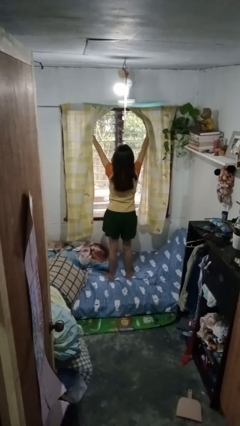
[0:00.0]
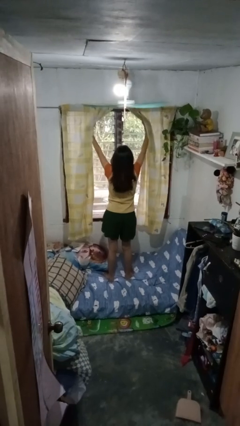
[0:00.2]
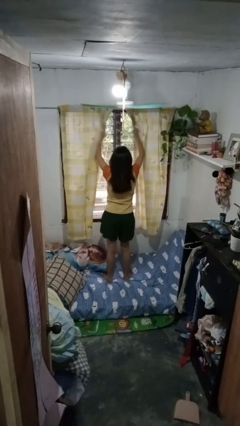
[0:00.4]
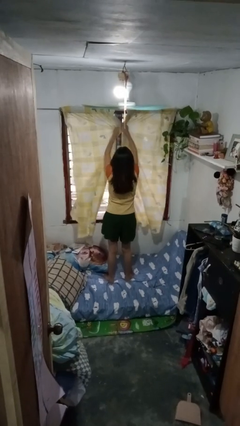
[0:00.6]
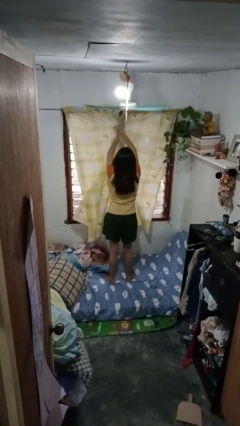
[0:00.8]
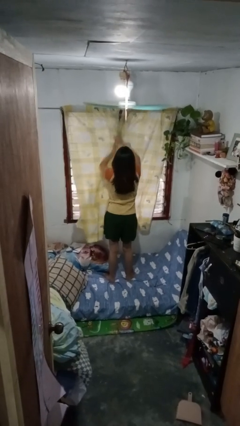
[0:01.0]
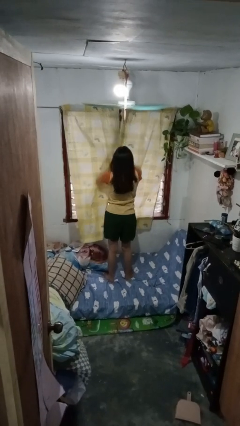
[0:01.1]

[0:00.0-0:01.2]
person closes curtains

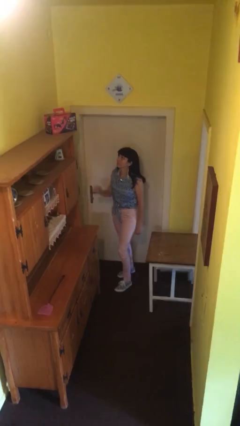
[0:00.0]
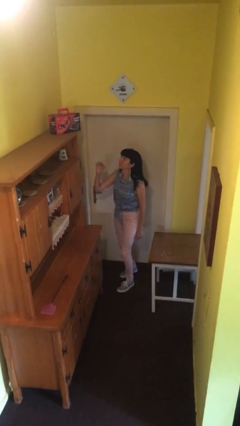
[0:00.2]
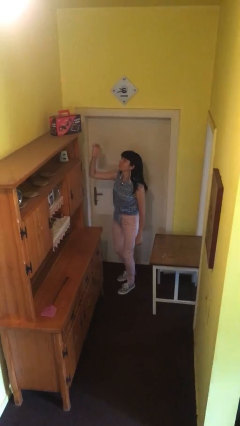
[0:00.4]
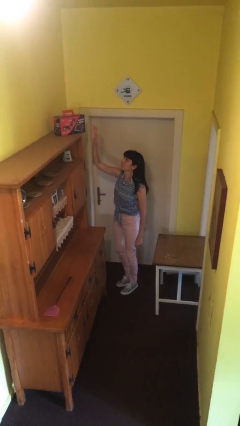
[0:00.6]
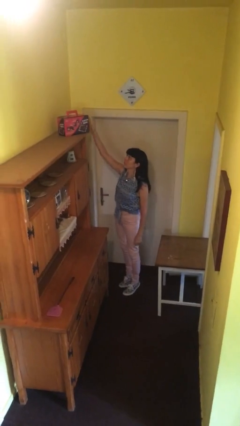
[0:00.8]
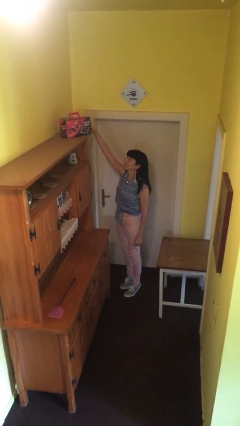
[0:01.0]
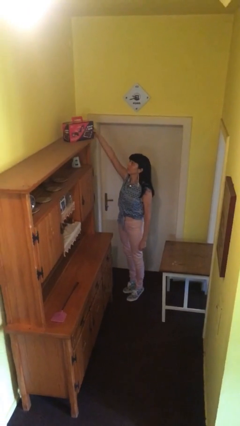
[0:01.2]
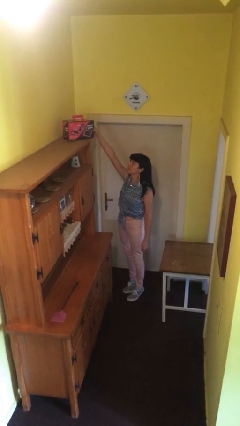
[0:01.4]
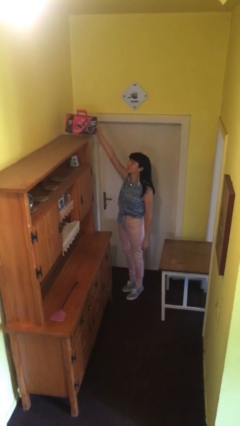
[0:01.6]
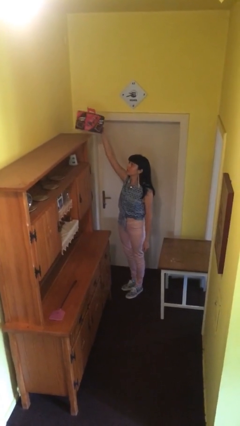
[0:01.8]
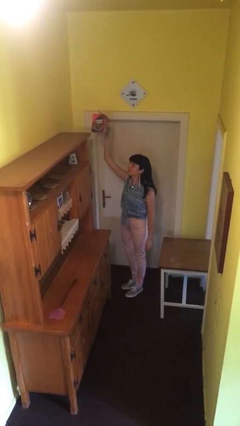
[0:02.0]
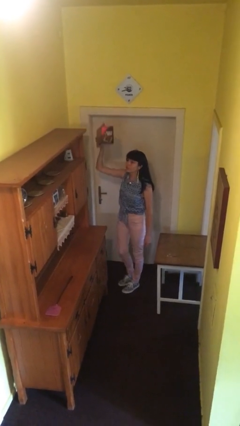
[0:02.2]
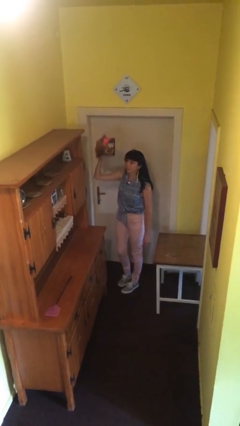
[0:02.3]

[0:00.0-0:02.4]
person picks up object from shelf

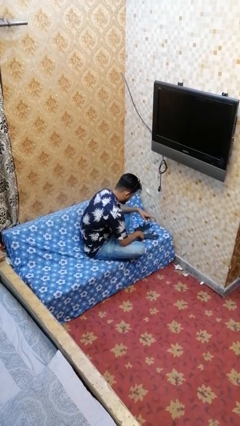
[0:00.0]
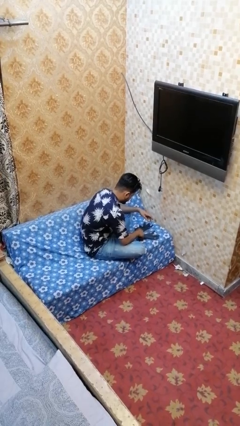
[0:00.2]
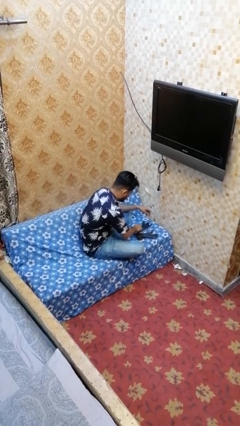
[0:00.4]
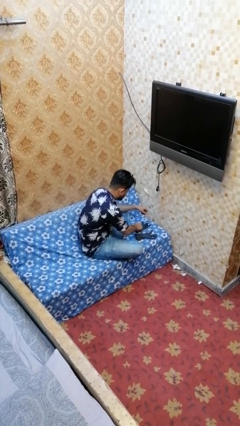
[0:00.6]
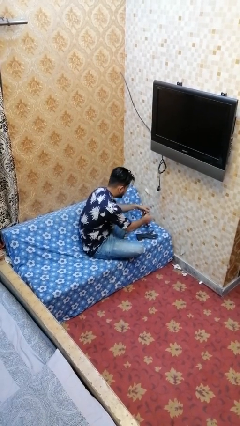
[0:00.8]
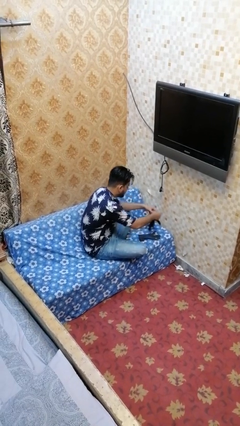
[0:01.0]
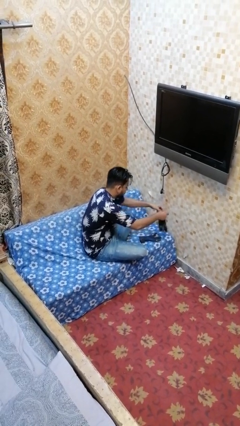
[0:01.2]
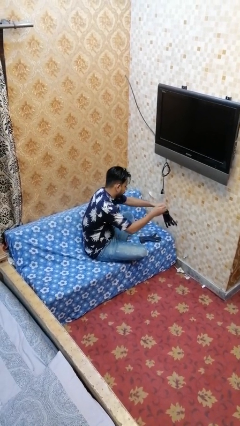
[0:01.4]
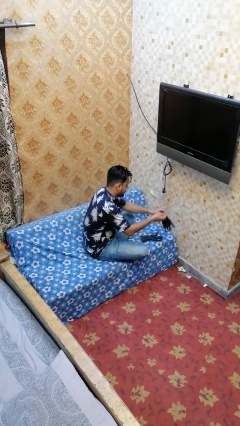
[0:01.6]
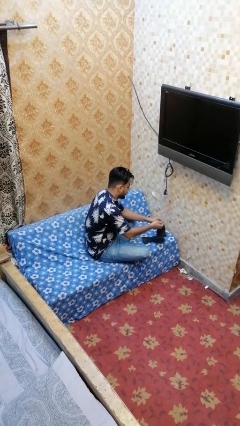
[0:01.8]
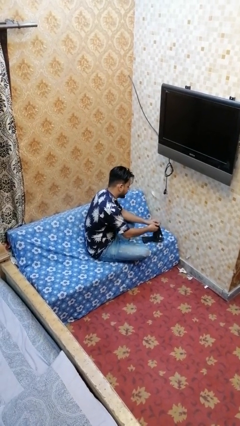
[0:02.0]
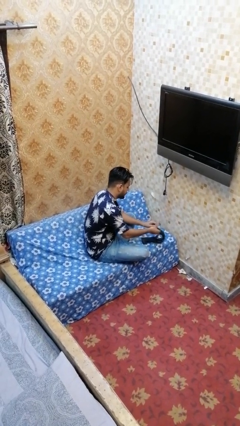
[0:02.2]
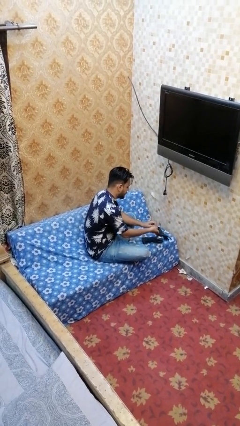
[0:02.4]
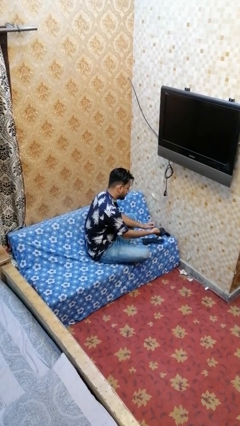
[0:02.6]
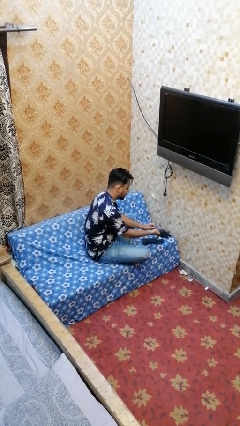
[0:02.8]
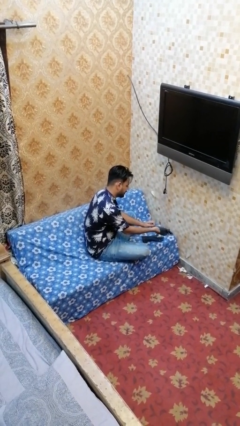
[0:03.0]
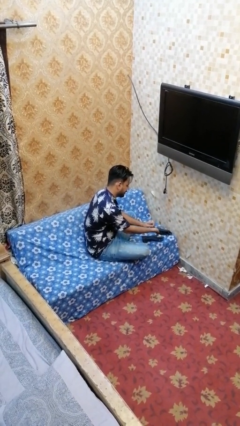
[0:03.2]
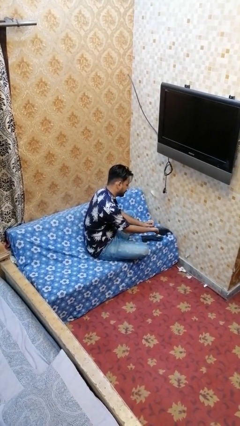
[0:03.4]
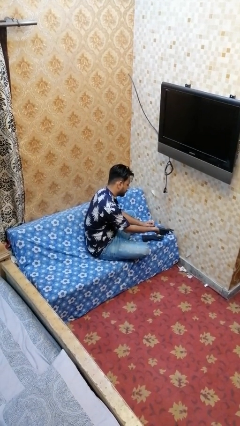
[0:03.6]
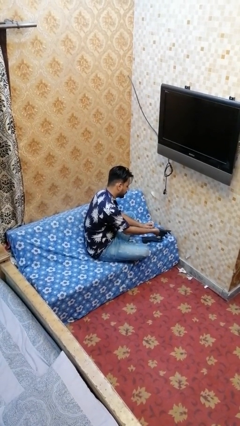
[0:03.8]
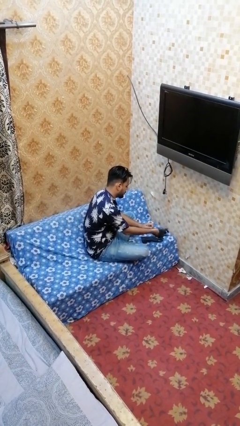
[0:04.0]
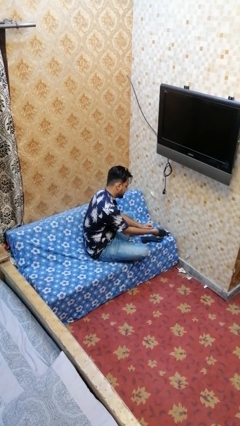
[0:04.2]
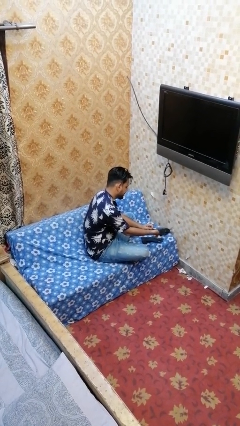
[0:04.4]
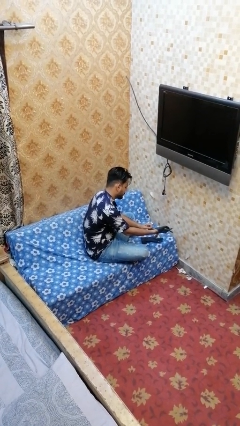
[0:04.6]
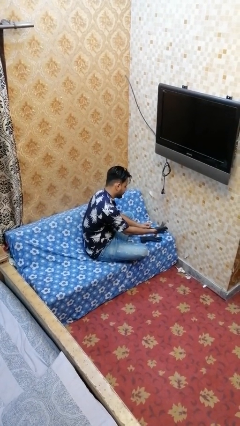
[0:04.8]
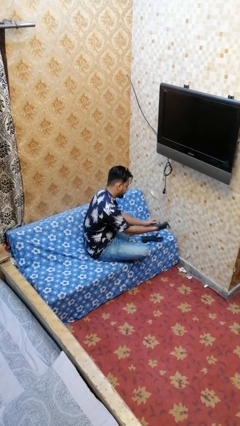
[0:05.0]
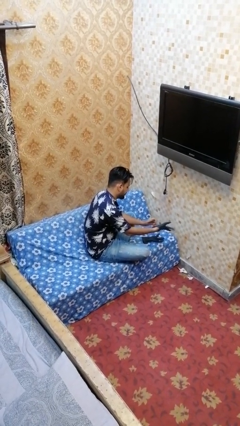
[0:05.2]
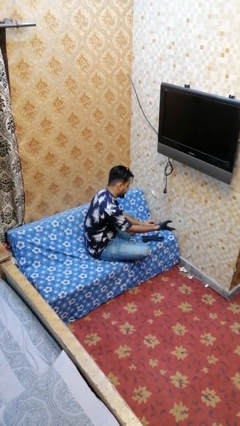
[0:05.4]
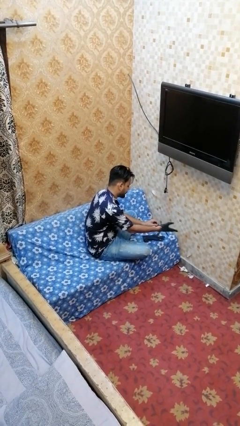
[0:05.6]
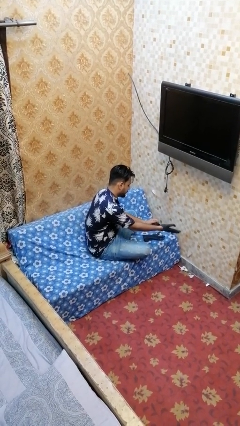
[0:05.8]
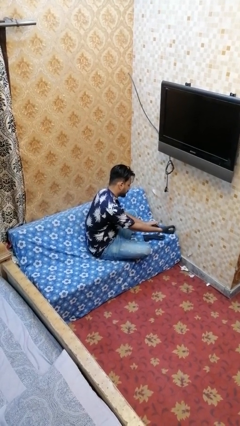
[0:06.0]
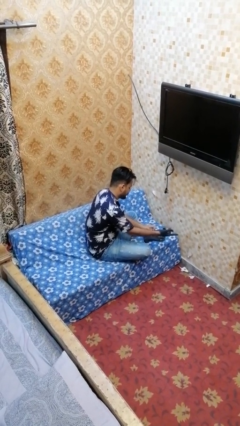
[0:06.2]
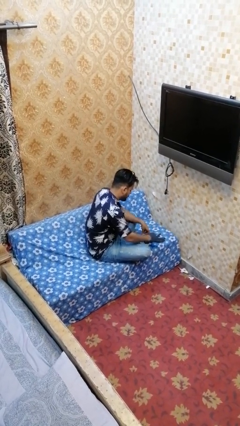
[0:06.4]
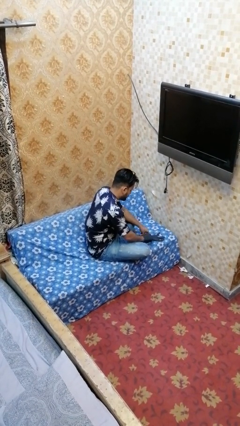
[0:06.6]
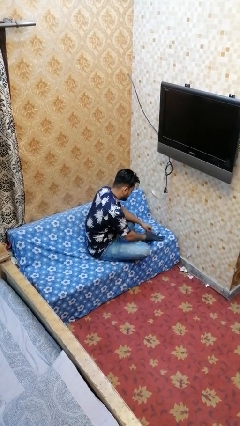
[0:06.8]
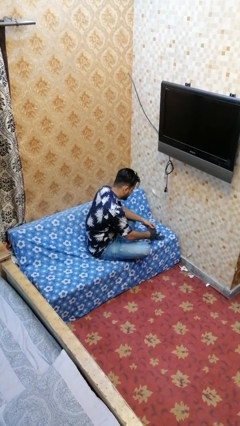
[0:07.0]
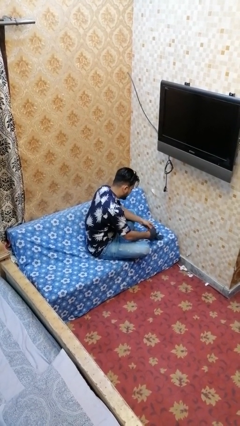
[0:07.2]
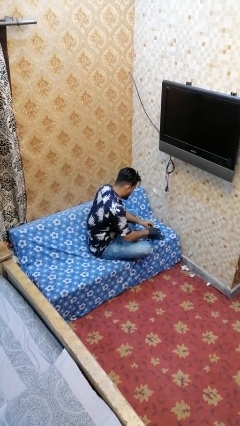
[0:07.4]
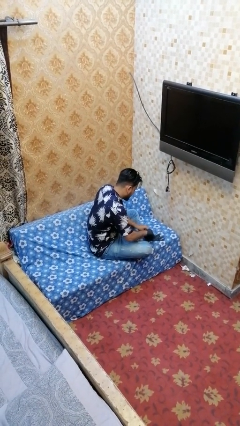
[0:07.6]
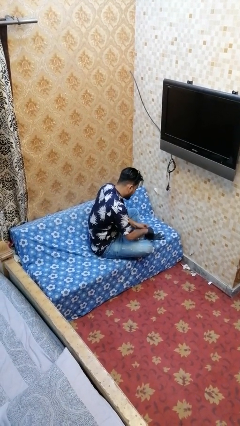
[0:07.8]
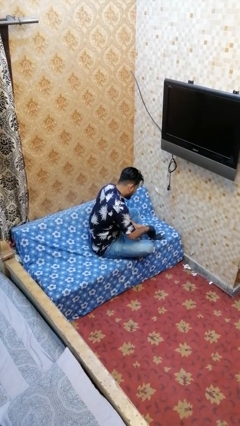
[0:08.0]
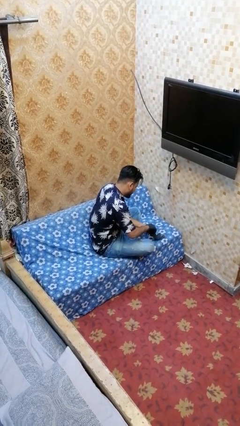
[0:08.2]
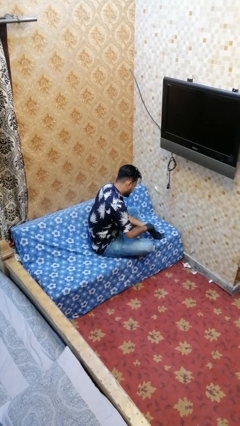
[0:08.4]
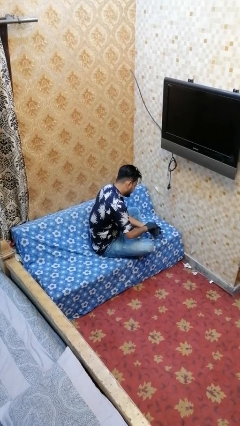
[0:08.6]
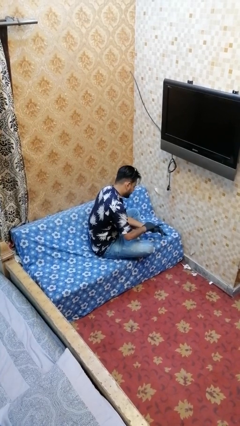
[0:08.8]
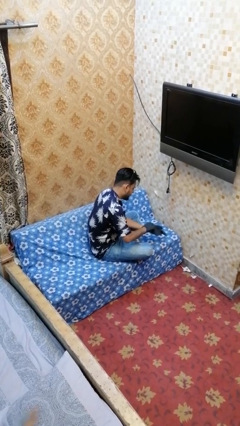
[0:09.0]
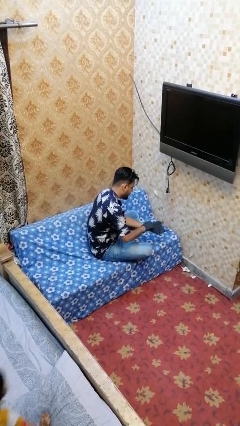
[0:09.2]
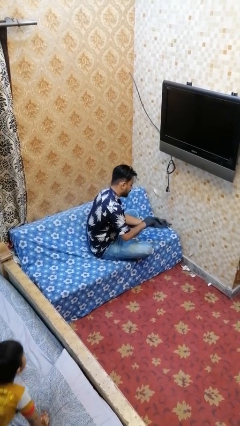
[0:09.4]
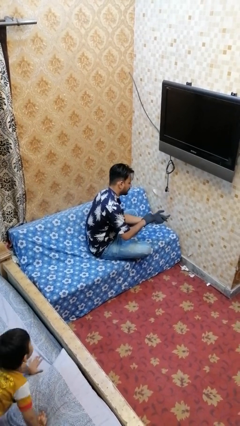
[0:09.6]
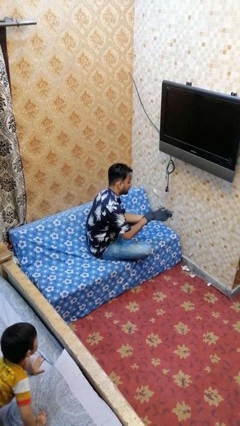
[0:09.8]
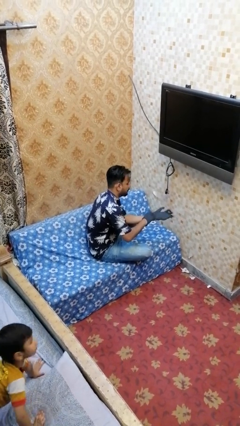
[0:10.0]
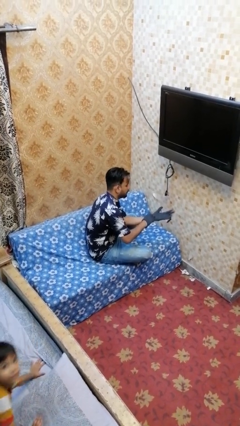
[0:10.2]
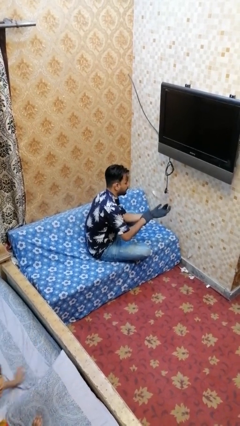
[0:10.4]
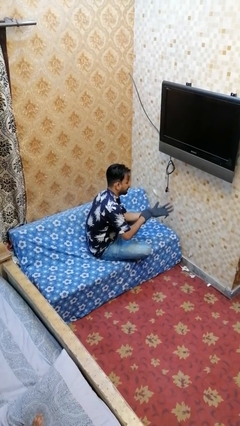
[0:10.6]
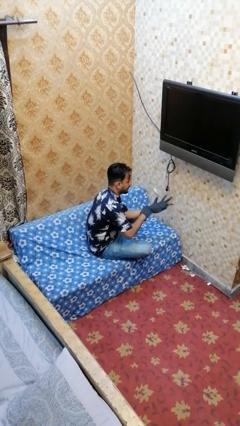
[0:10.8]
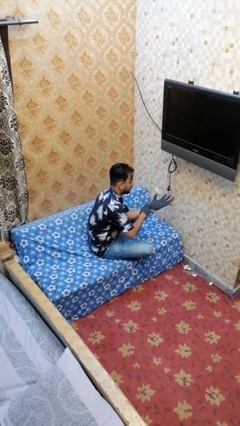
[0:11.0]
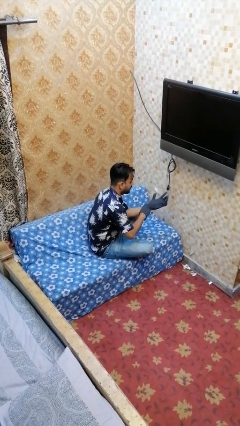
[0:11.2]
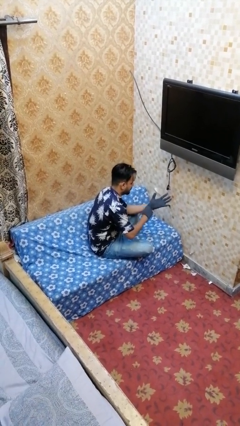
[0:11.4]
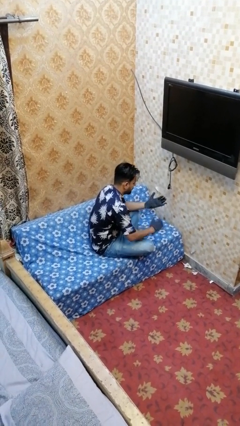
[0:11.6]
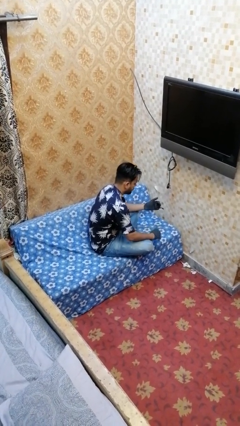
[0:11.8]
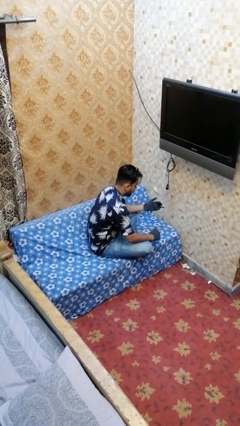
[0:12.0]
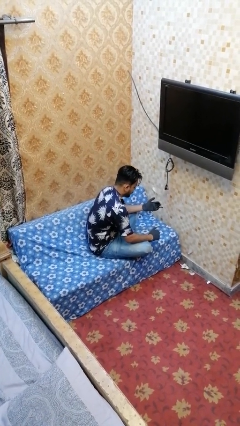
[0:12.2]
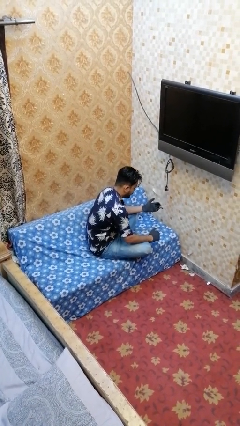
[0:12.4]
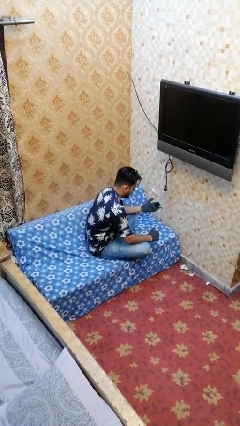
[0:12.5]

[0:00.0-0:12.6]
person puts on gloves

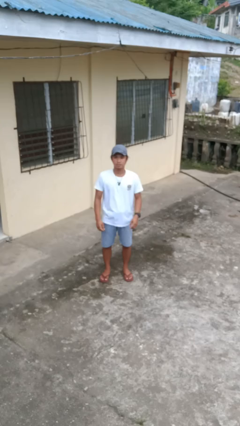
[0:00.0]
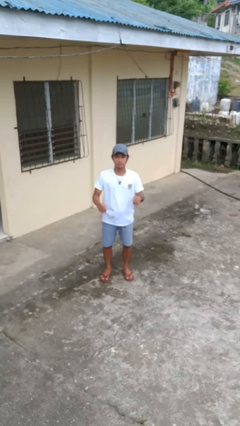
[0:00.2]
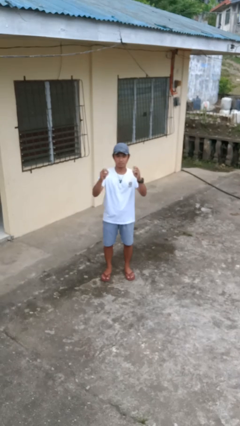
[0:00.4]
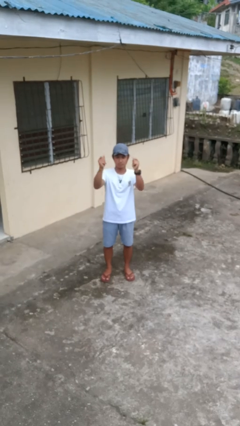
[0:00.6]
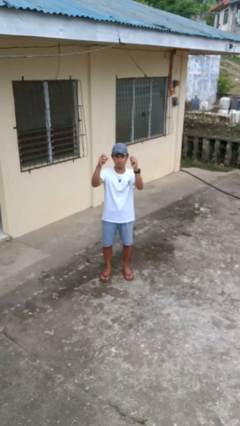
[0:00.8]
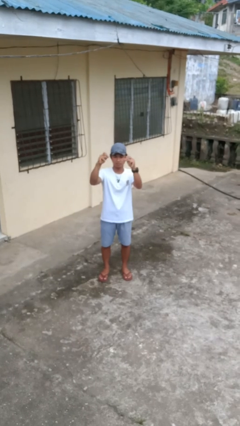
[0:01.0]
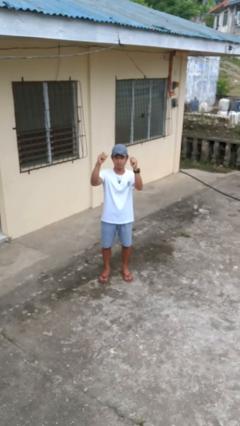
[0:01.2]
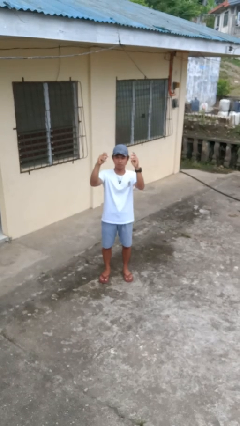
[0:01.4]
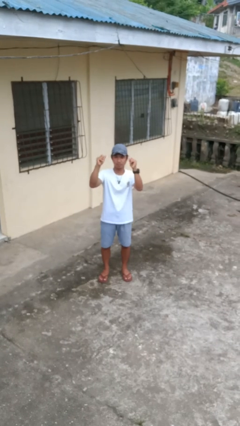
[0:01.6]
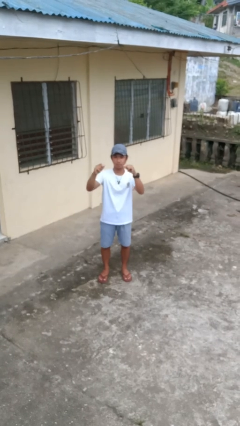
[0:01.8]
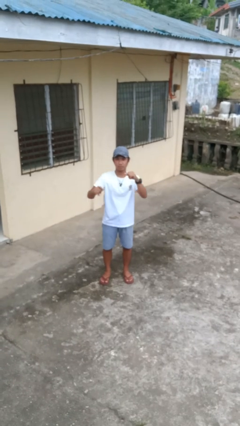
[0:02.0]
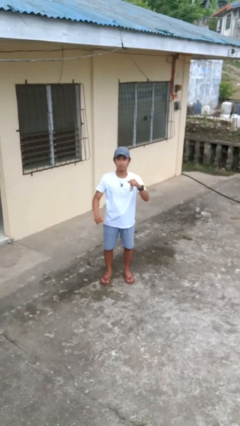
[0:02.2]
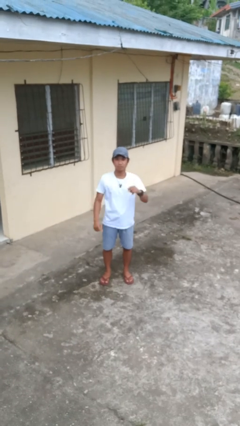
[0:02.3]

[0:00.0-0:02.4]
person snaps fingers
